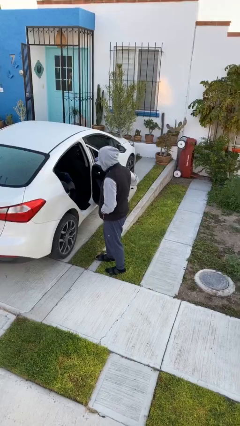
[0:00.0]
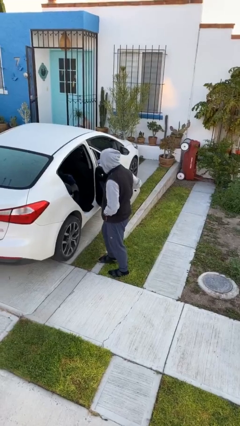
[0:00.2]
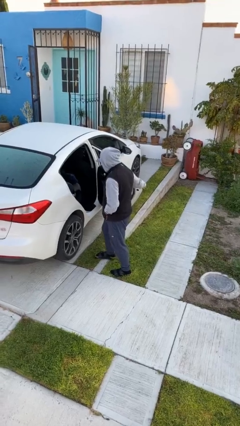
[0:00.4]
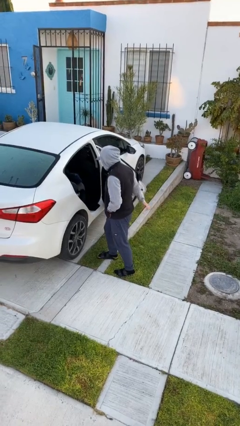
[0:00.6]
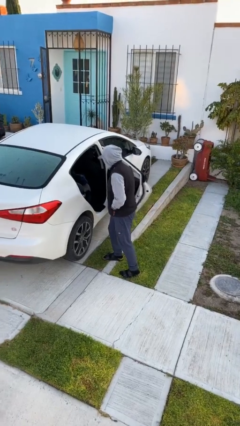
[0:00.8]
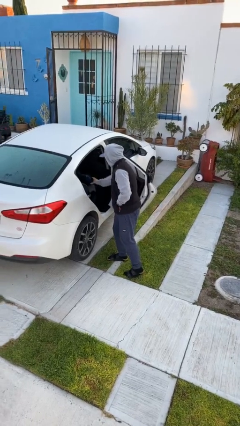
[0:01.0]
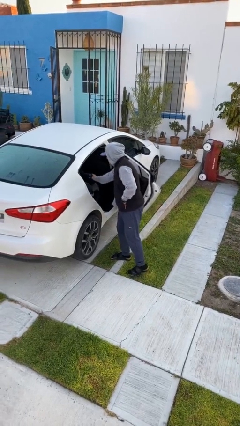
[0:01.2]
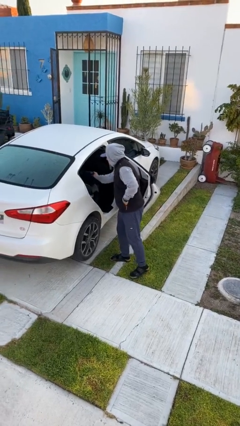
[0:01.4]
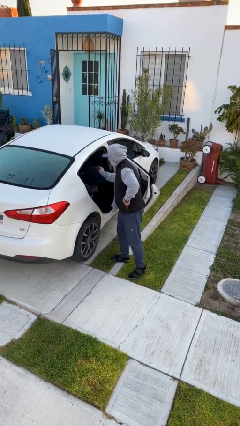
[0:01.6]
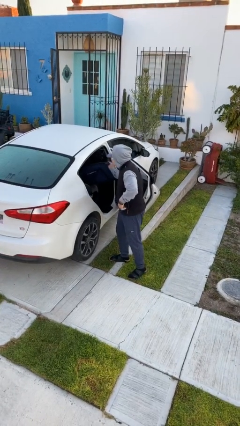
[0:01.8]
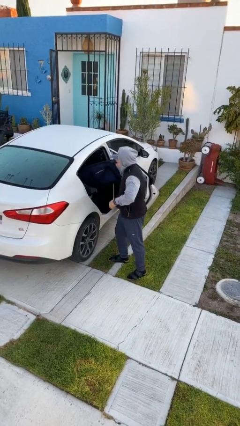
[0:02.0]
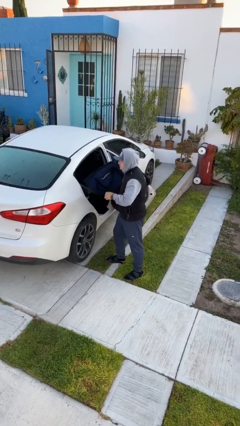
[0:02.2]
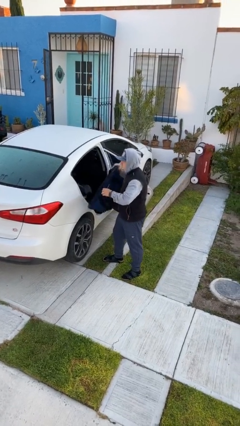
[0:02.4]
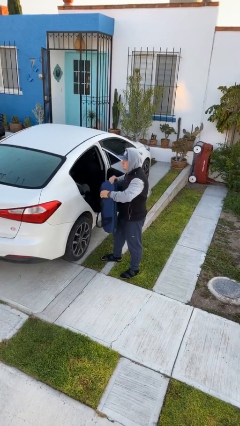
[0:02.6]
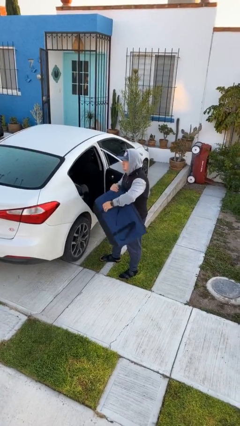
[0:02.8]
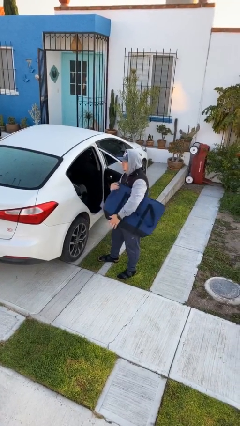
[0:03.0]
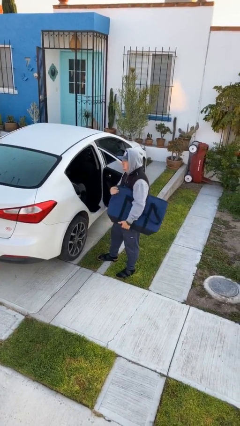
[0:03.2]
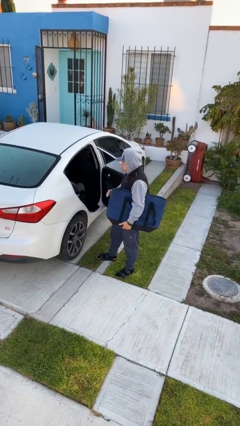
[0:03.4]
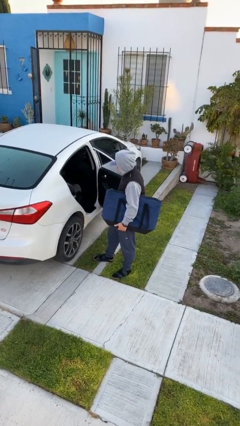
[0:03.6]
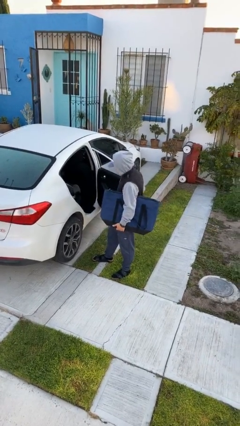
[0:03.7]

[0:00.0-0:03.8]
person unloads car

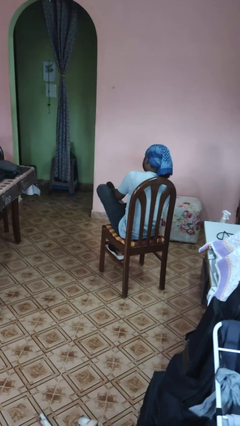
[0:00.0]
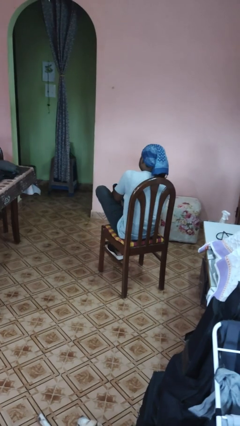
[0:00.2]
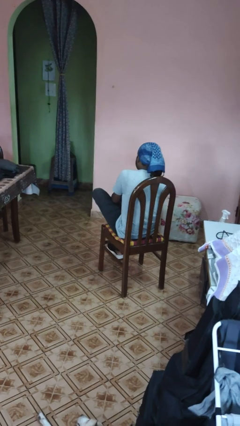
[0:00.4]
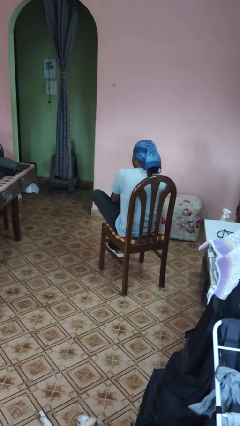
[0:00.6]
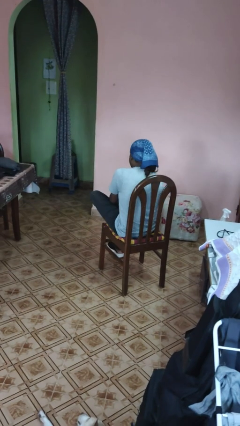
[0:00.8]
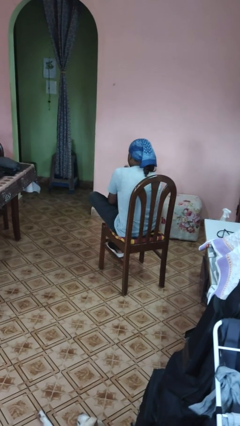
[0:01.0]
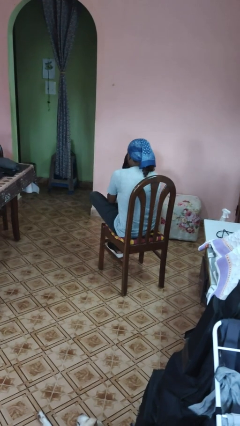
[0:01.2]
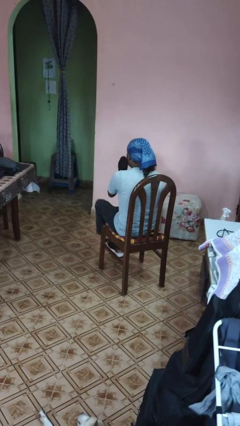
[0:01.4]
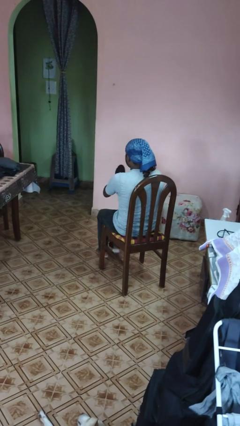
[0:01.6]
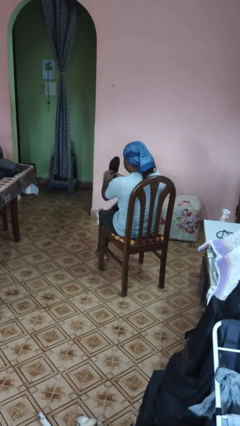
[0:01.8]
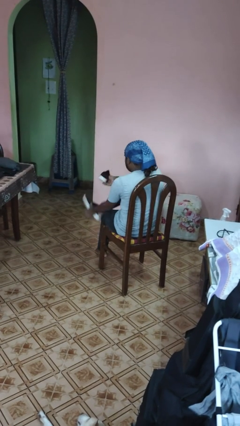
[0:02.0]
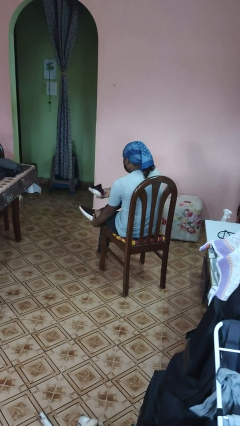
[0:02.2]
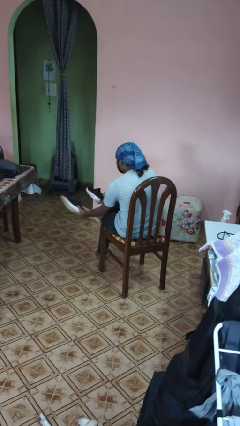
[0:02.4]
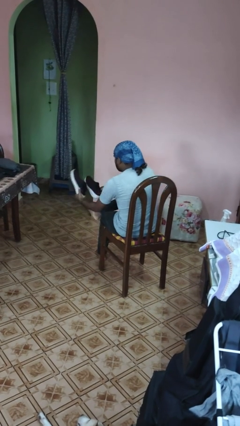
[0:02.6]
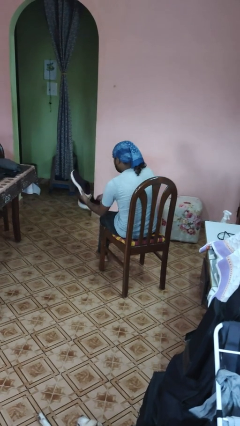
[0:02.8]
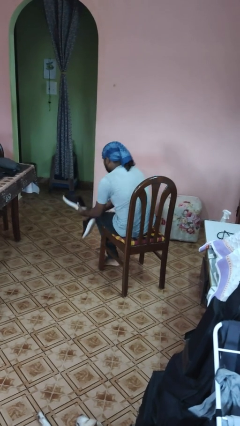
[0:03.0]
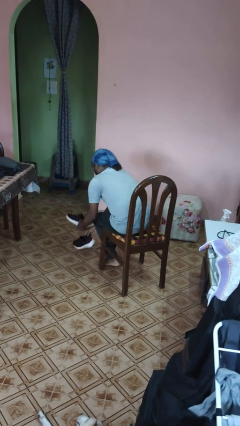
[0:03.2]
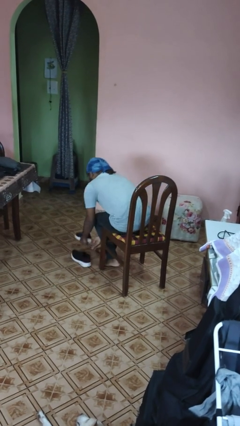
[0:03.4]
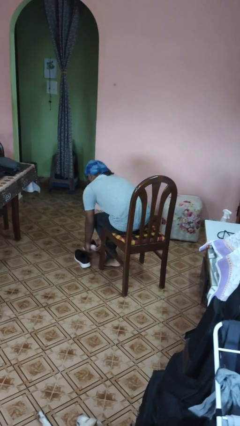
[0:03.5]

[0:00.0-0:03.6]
person takes off shoes

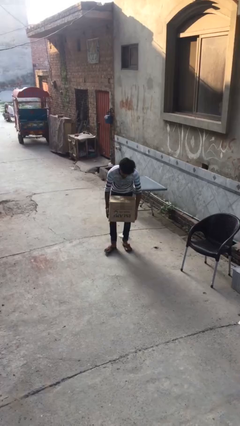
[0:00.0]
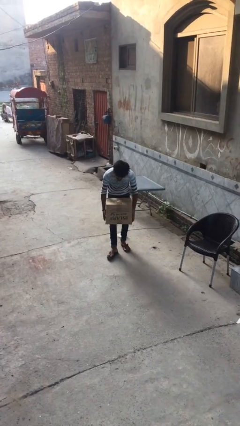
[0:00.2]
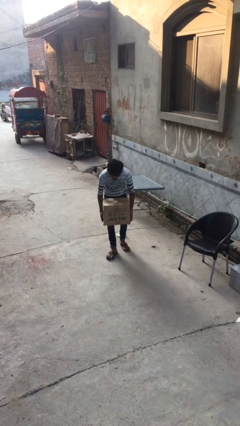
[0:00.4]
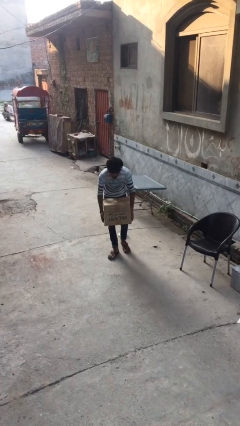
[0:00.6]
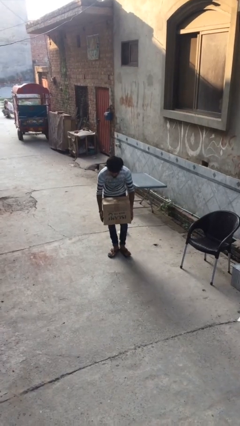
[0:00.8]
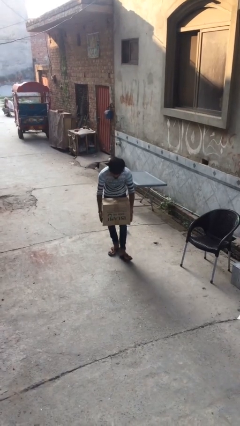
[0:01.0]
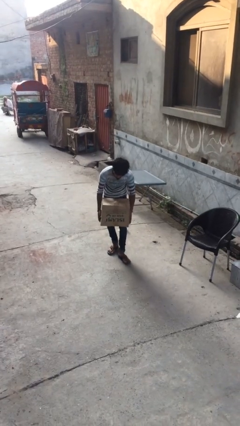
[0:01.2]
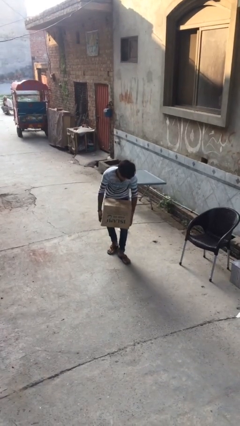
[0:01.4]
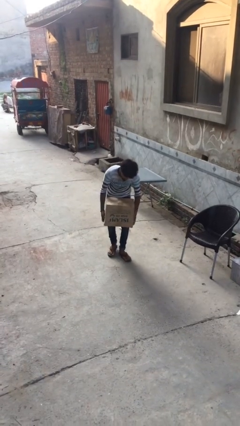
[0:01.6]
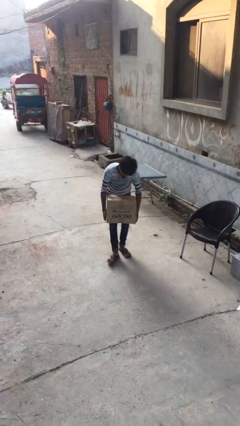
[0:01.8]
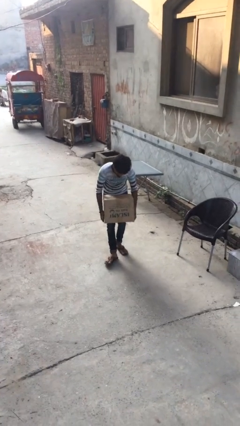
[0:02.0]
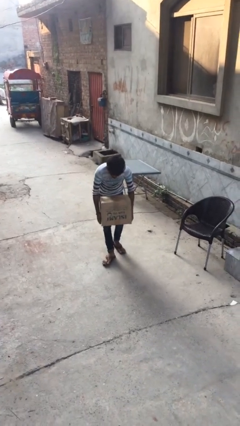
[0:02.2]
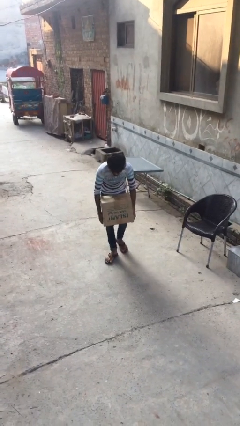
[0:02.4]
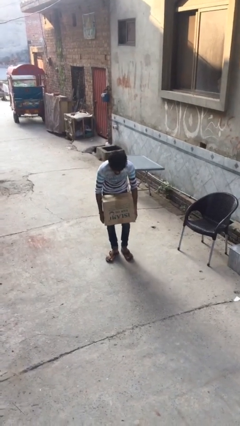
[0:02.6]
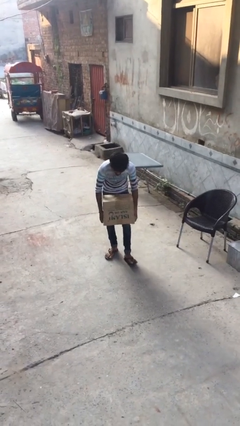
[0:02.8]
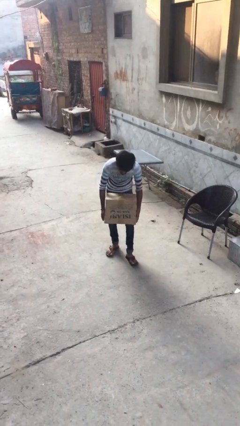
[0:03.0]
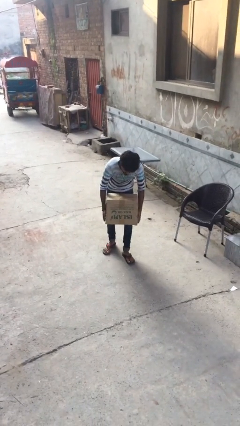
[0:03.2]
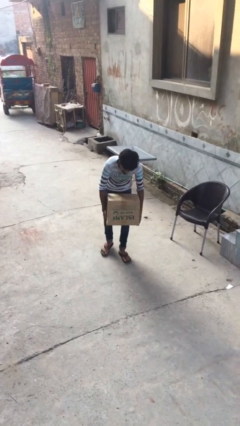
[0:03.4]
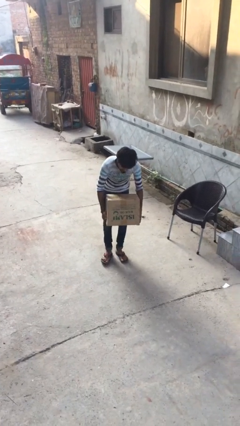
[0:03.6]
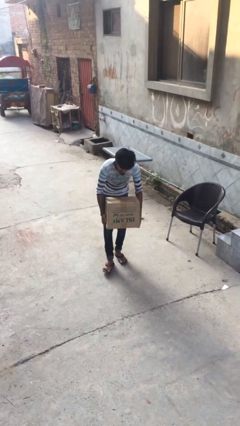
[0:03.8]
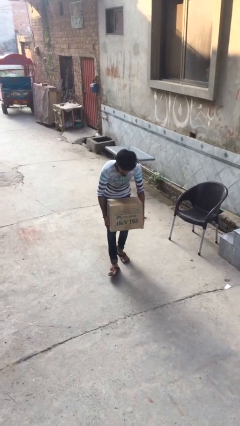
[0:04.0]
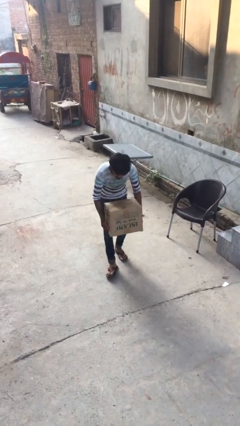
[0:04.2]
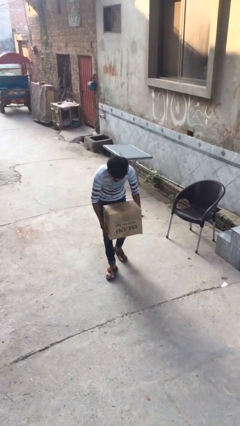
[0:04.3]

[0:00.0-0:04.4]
person carries heavy object

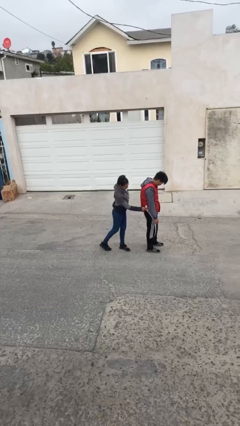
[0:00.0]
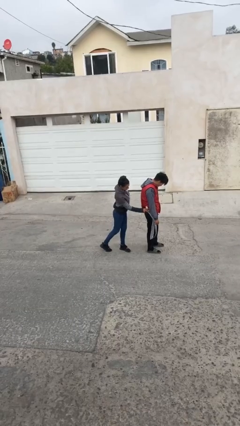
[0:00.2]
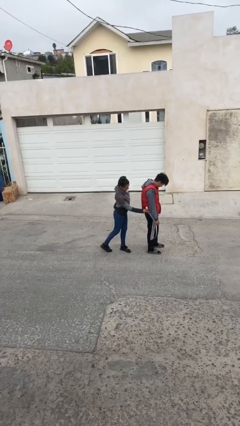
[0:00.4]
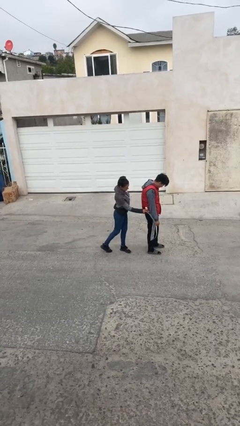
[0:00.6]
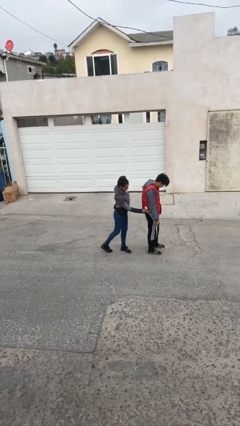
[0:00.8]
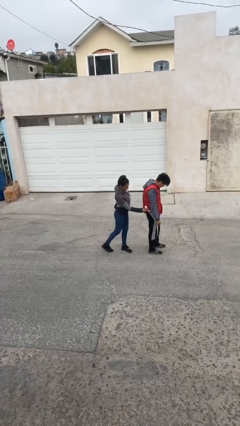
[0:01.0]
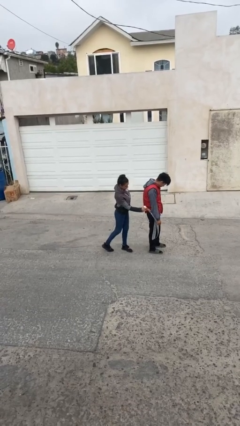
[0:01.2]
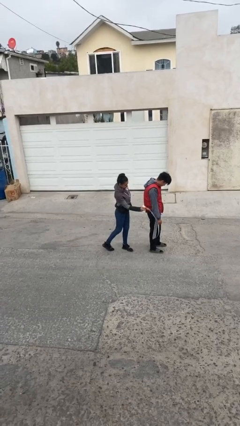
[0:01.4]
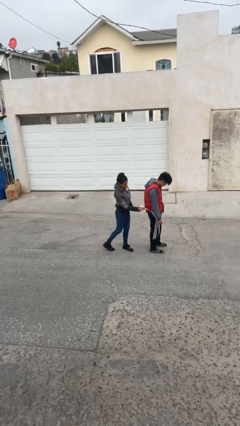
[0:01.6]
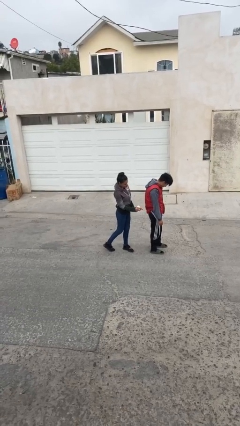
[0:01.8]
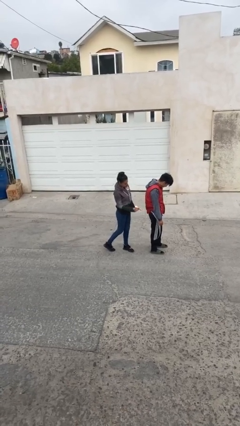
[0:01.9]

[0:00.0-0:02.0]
person steals object from person

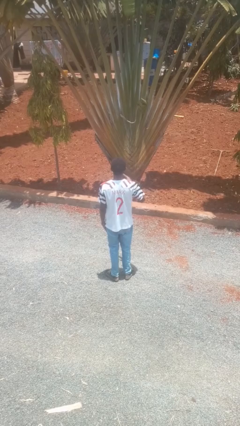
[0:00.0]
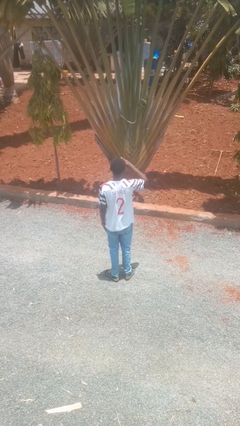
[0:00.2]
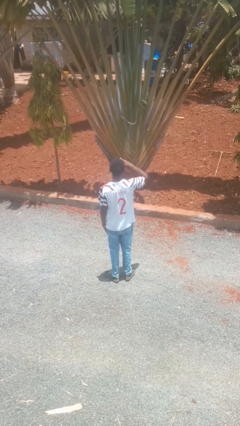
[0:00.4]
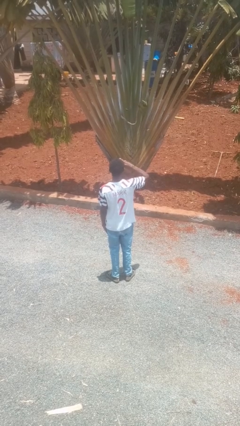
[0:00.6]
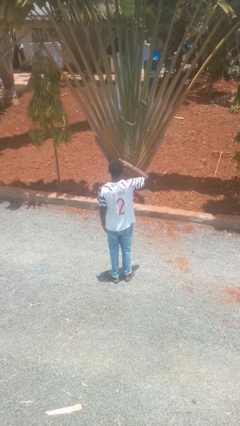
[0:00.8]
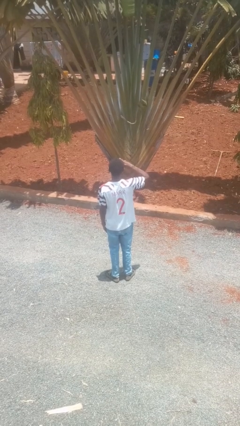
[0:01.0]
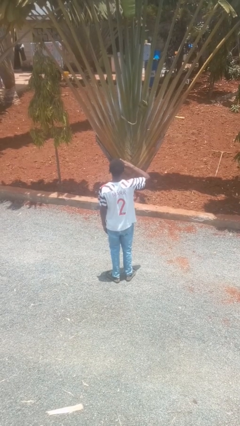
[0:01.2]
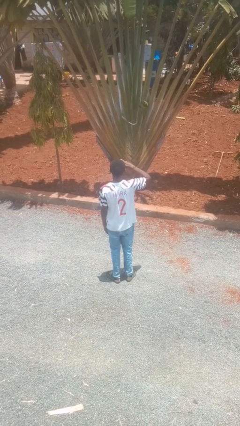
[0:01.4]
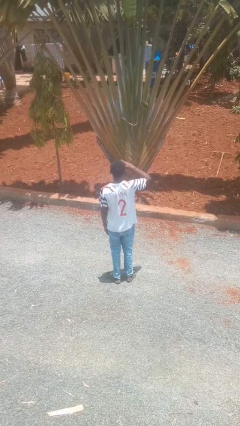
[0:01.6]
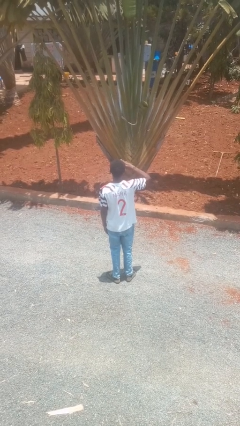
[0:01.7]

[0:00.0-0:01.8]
person salutes

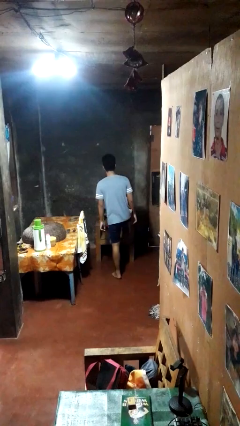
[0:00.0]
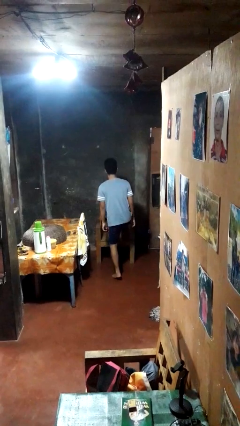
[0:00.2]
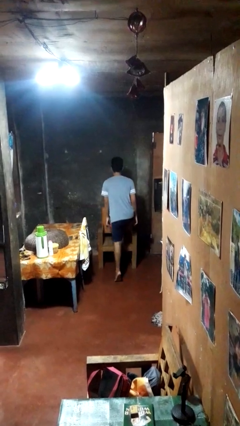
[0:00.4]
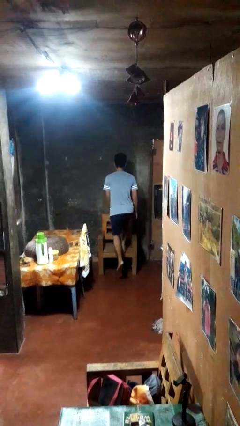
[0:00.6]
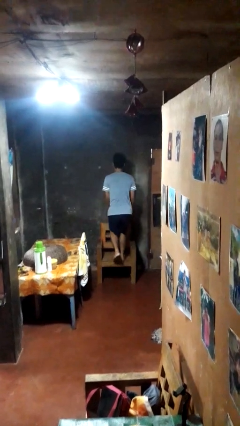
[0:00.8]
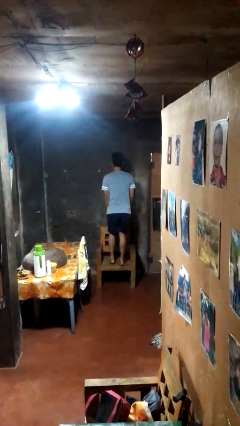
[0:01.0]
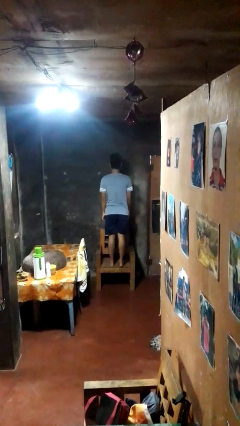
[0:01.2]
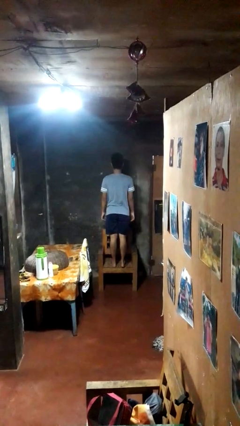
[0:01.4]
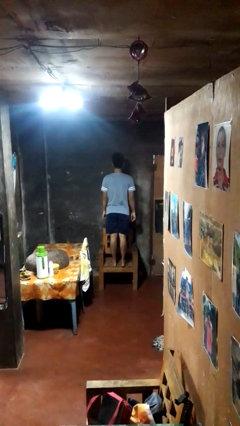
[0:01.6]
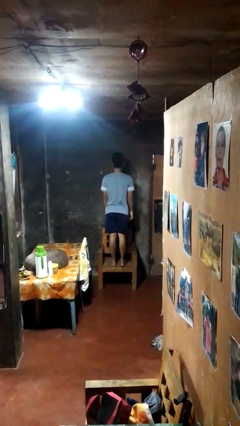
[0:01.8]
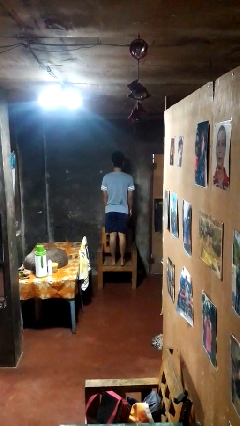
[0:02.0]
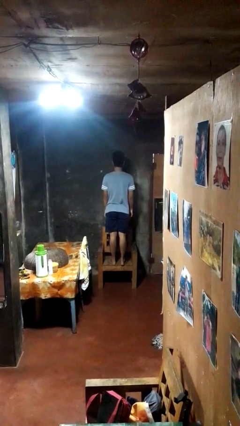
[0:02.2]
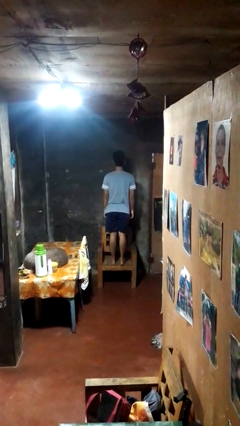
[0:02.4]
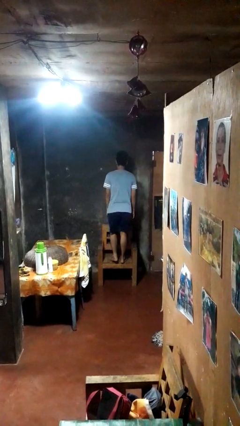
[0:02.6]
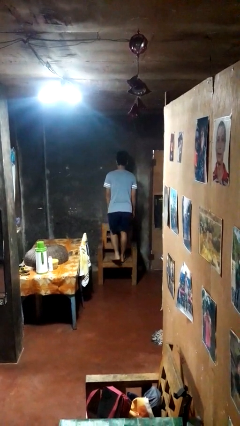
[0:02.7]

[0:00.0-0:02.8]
person climbs on chair
